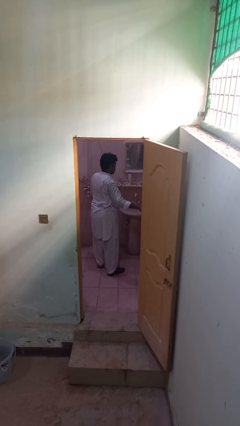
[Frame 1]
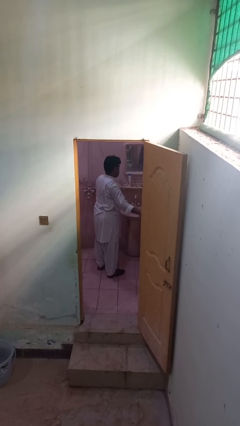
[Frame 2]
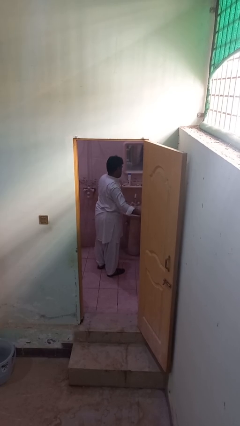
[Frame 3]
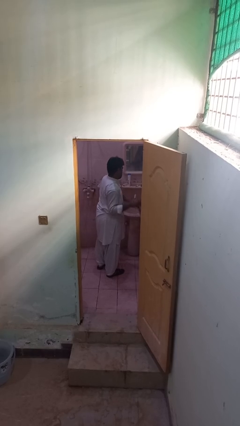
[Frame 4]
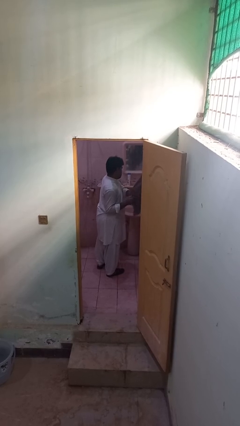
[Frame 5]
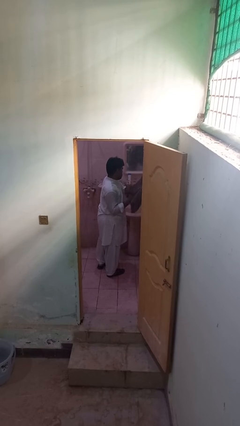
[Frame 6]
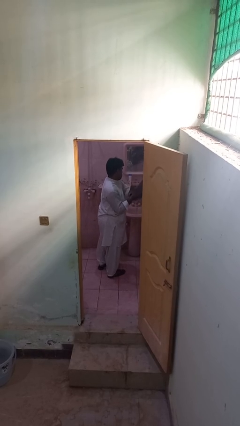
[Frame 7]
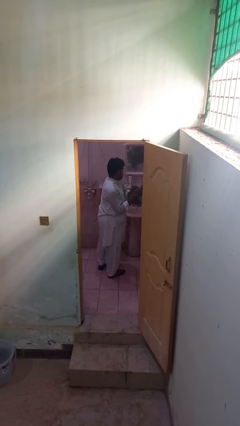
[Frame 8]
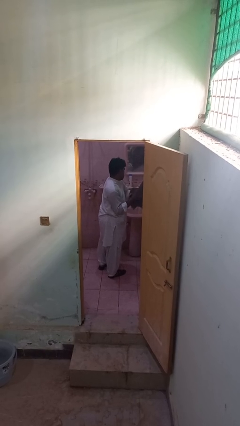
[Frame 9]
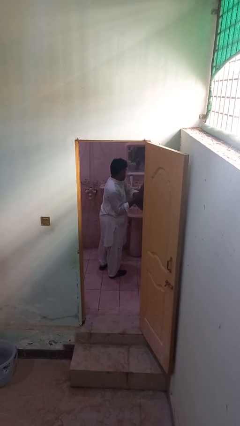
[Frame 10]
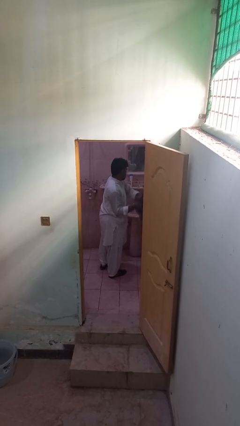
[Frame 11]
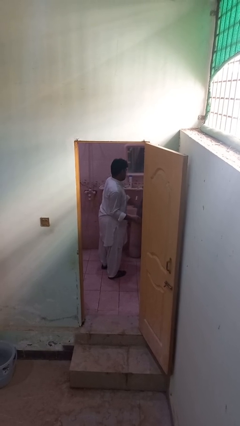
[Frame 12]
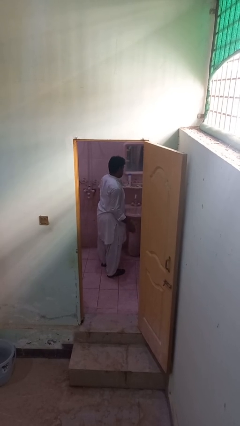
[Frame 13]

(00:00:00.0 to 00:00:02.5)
person dries hands with towel

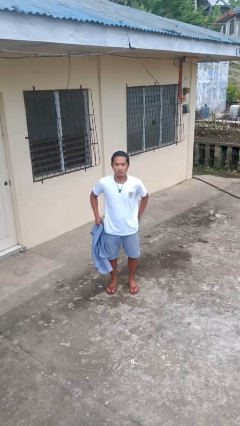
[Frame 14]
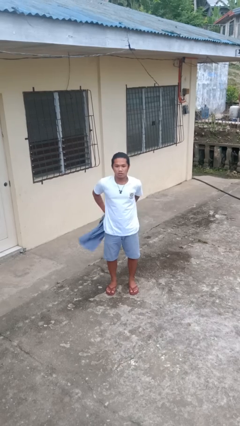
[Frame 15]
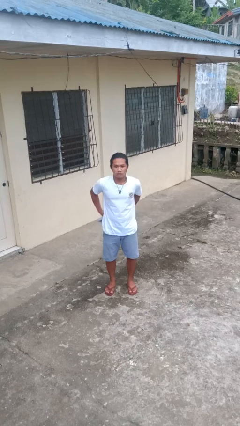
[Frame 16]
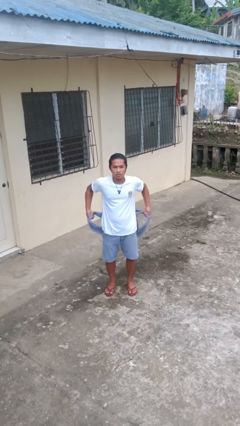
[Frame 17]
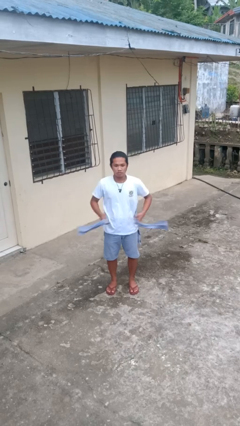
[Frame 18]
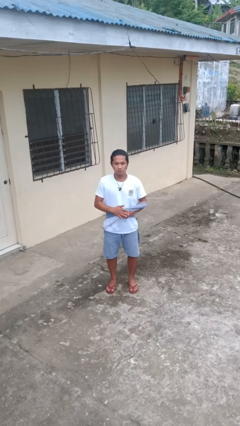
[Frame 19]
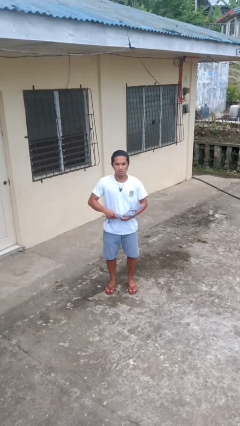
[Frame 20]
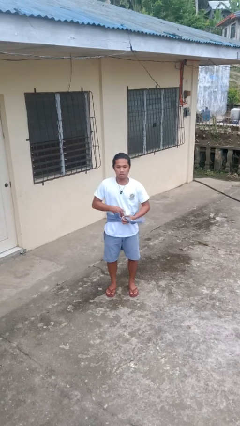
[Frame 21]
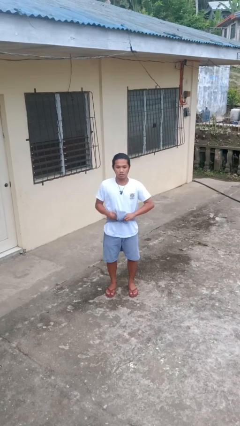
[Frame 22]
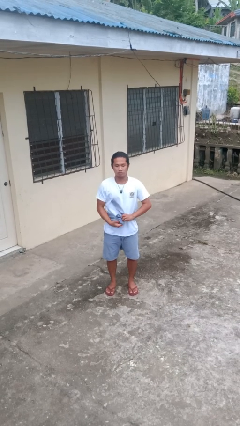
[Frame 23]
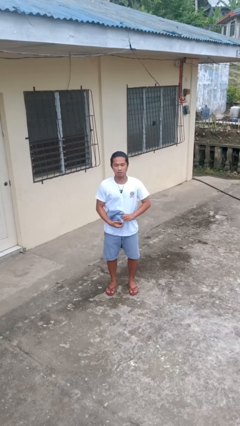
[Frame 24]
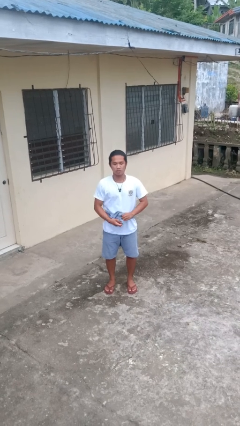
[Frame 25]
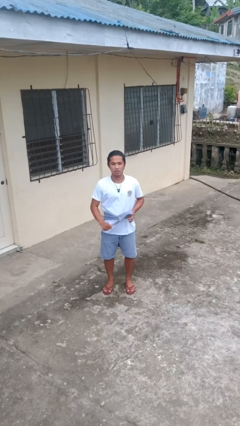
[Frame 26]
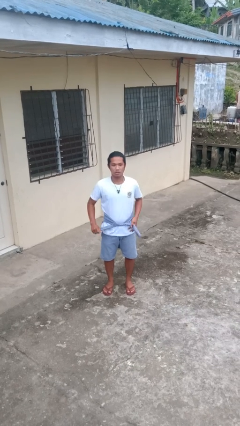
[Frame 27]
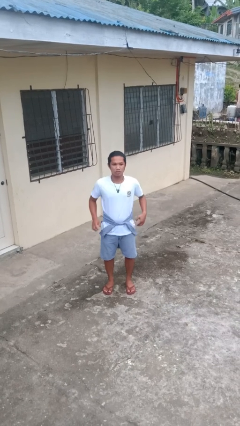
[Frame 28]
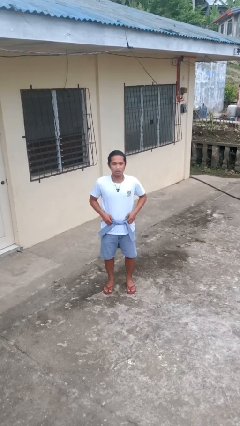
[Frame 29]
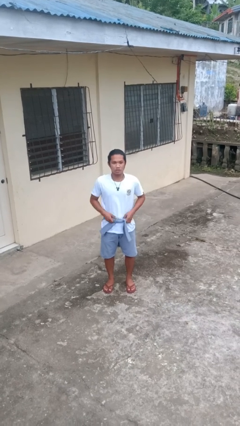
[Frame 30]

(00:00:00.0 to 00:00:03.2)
person ties jacket around waist

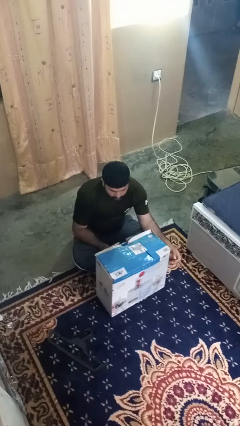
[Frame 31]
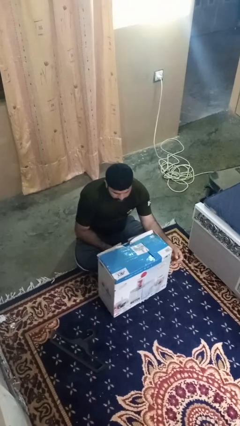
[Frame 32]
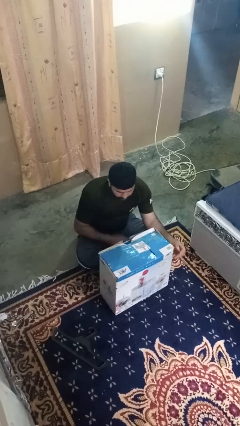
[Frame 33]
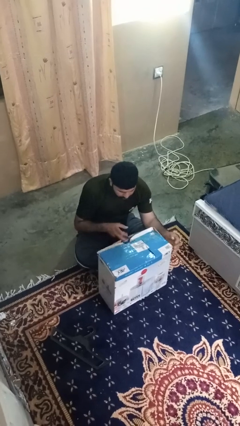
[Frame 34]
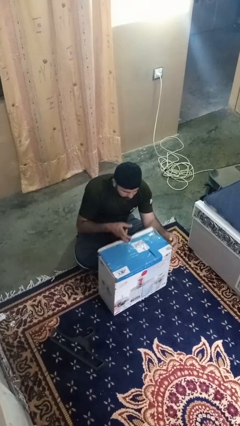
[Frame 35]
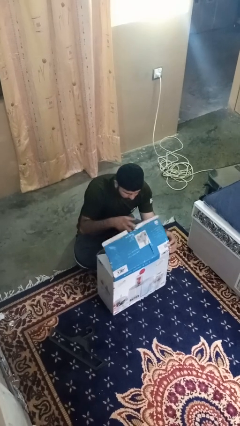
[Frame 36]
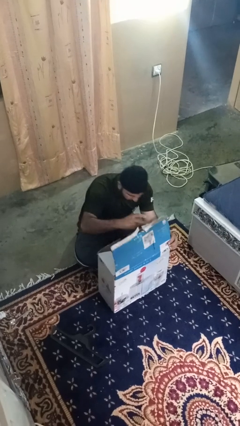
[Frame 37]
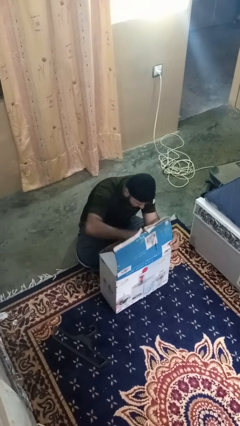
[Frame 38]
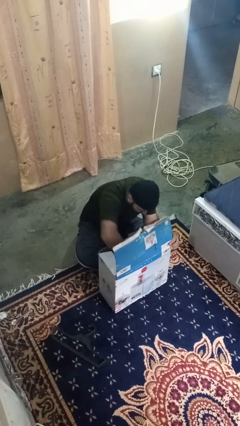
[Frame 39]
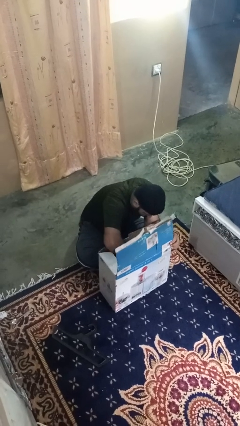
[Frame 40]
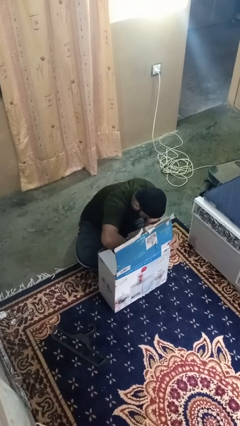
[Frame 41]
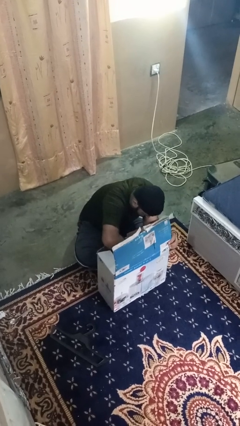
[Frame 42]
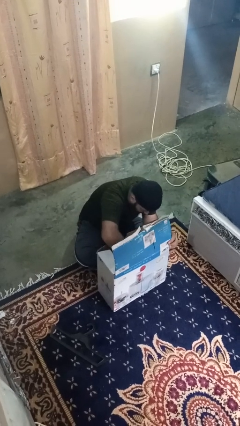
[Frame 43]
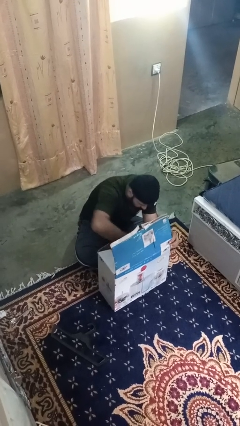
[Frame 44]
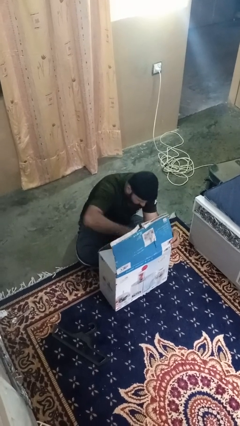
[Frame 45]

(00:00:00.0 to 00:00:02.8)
person searches in box

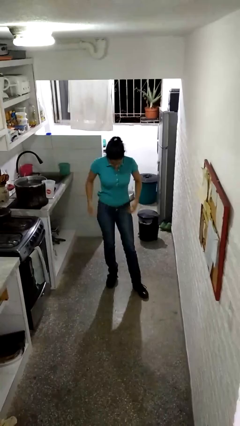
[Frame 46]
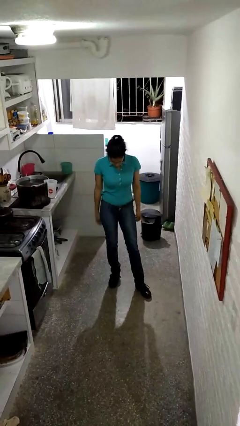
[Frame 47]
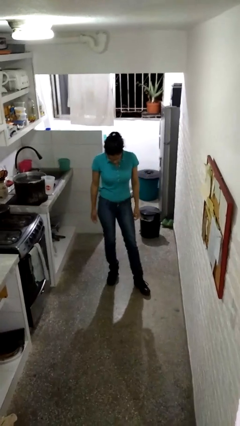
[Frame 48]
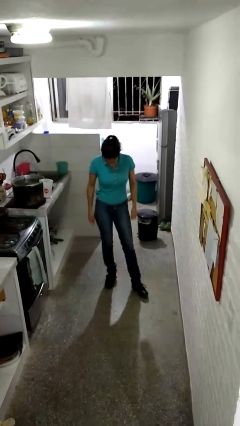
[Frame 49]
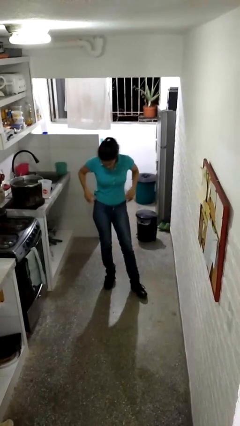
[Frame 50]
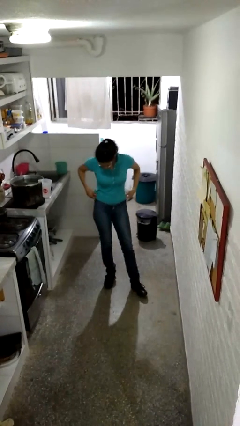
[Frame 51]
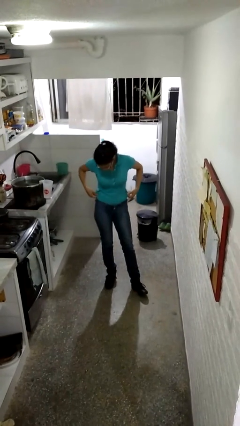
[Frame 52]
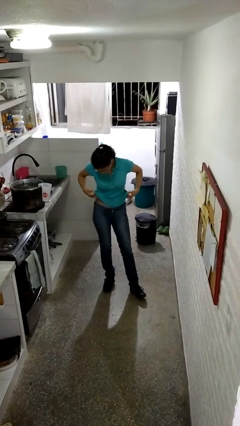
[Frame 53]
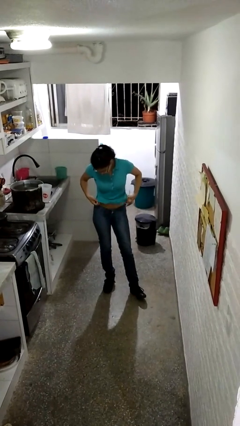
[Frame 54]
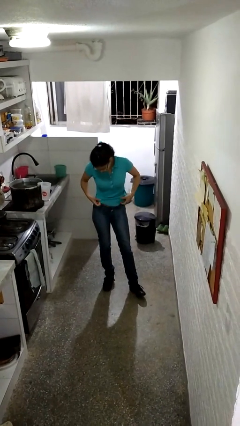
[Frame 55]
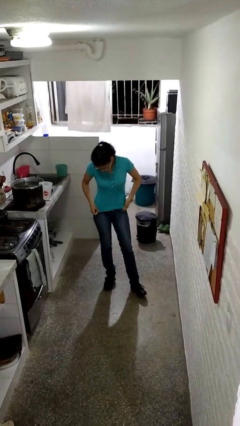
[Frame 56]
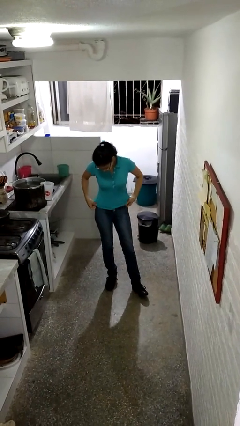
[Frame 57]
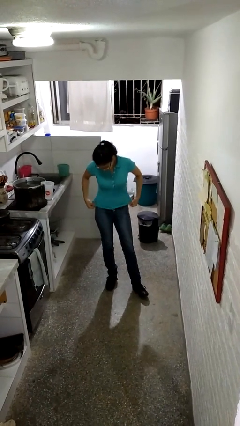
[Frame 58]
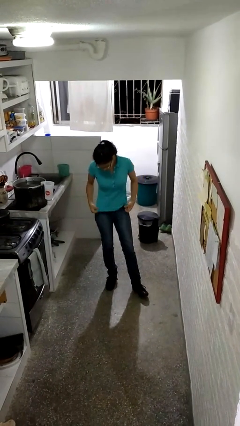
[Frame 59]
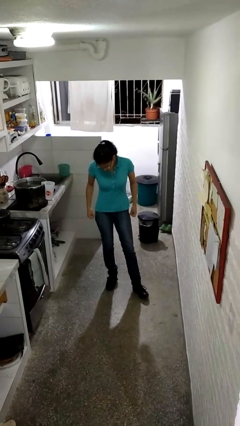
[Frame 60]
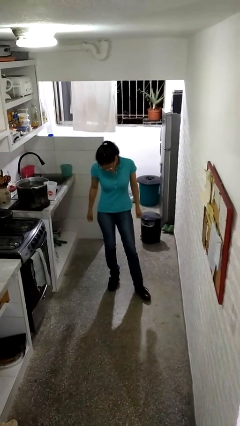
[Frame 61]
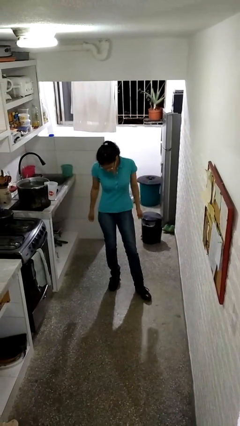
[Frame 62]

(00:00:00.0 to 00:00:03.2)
person untucks shirt

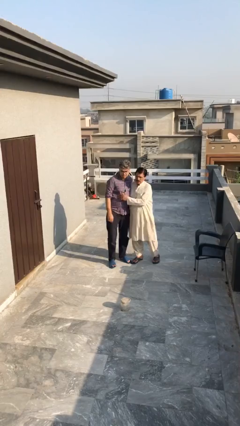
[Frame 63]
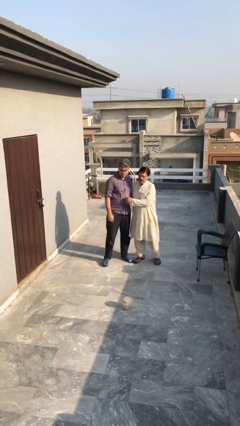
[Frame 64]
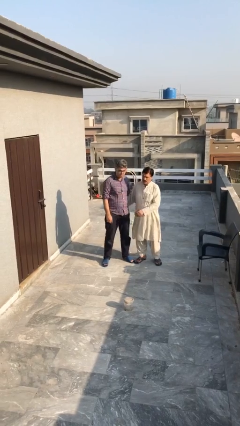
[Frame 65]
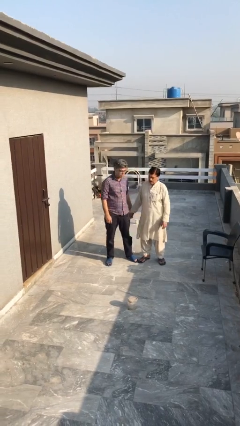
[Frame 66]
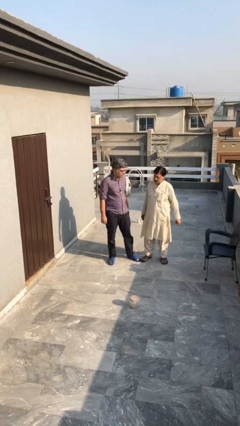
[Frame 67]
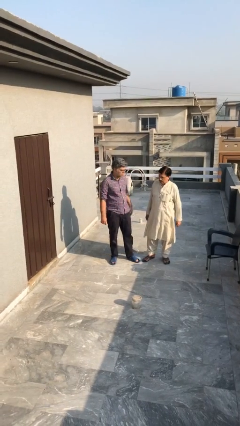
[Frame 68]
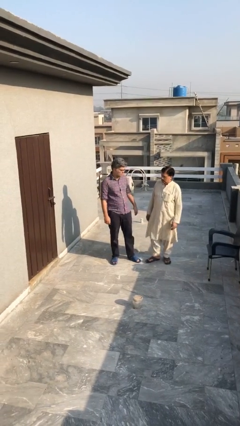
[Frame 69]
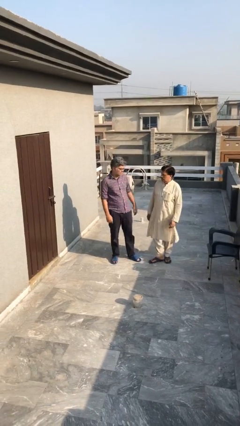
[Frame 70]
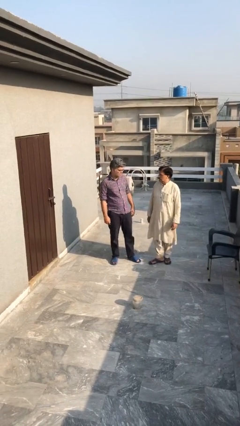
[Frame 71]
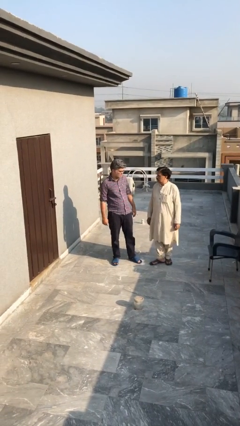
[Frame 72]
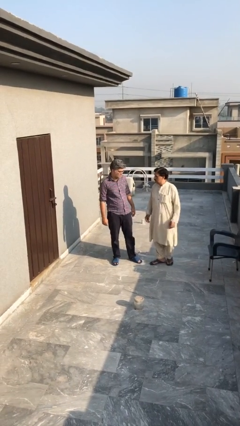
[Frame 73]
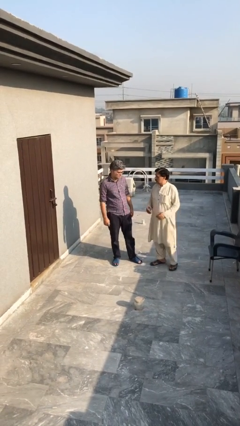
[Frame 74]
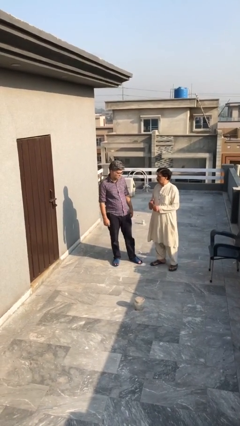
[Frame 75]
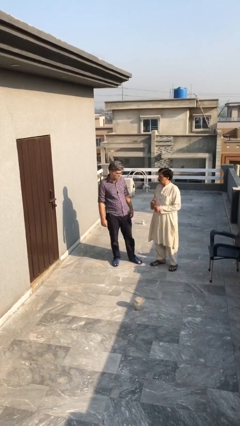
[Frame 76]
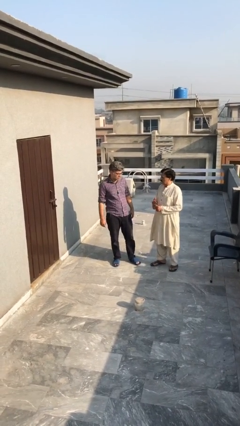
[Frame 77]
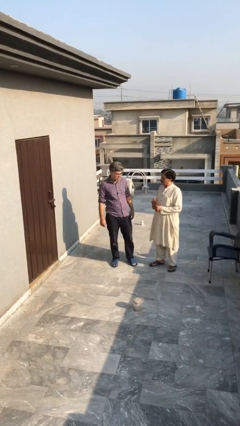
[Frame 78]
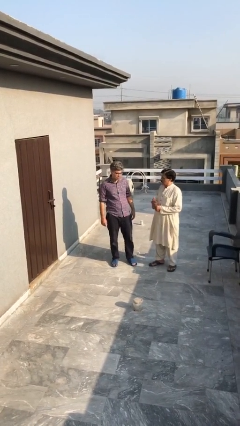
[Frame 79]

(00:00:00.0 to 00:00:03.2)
person talks to person

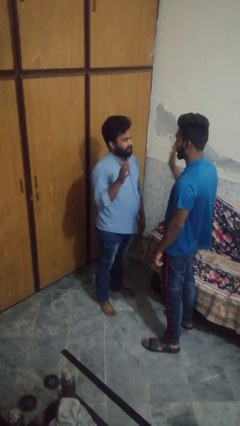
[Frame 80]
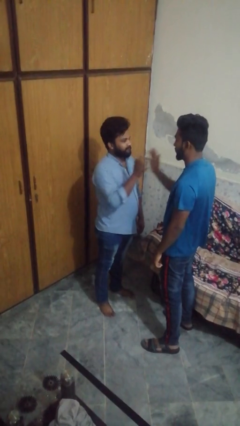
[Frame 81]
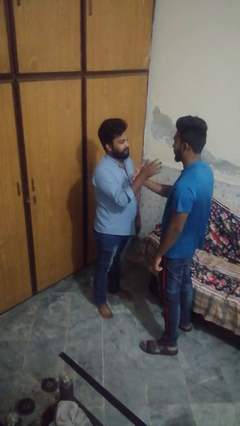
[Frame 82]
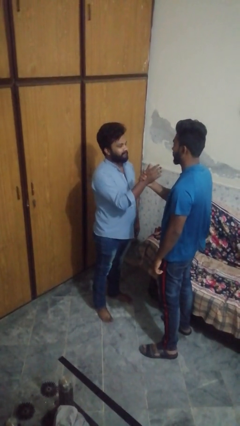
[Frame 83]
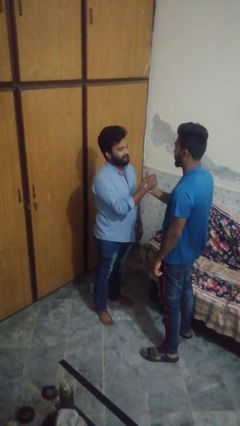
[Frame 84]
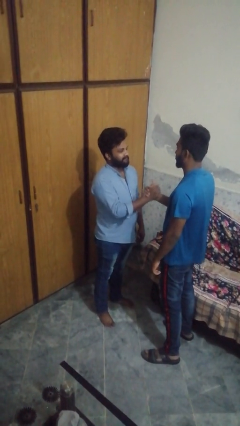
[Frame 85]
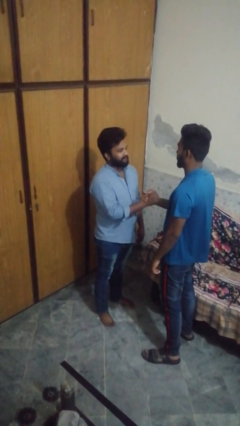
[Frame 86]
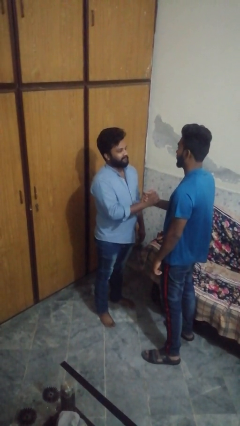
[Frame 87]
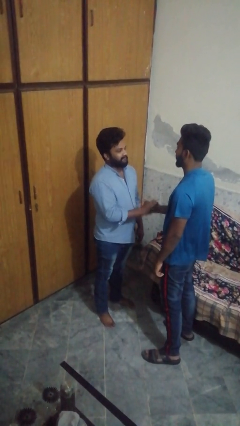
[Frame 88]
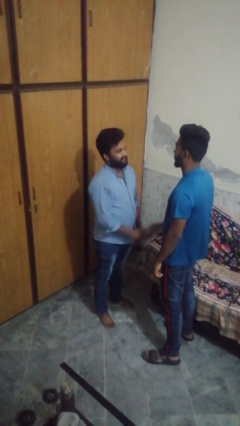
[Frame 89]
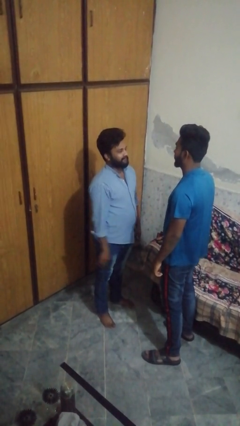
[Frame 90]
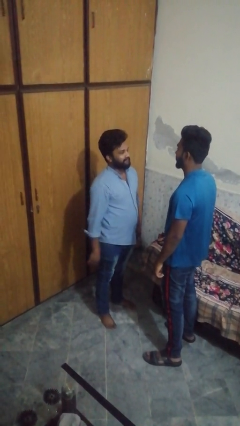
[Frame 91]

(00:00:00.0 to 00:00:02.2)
person highfives hand

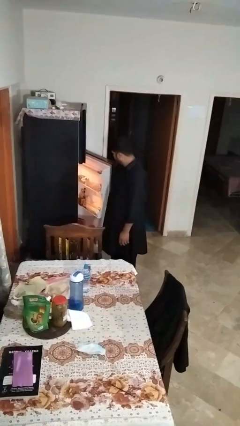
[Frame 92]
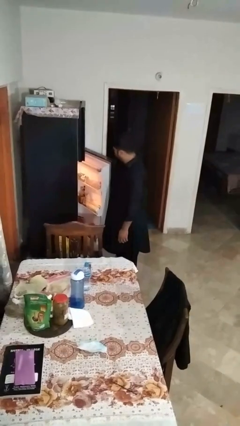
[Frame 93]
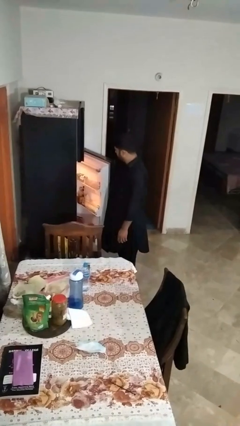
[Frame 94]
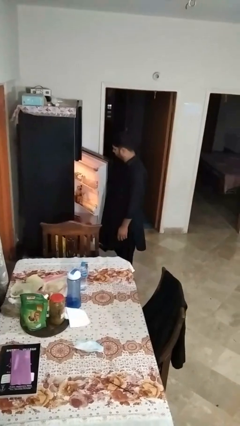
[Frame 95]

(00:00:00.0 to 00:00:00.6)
person loads groceries into refrigerator
